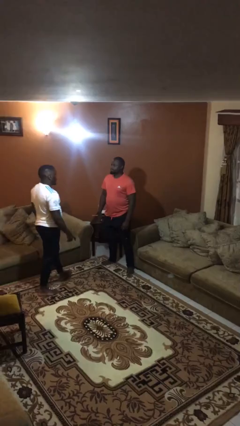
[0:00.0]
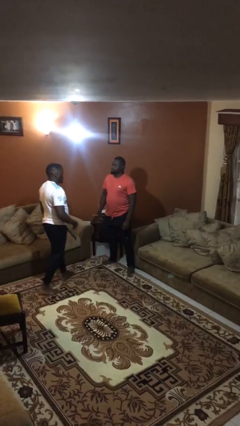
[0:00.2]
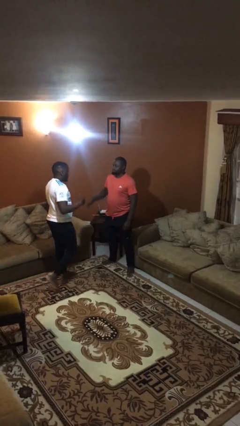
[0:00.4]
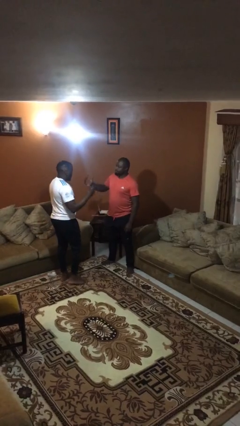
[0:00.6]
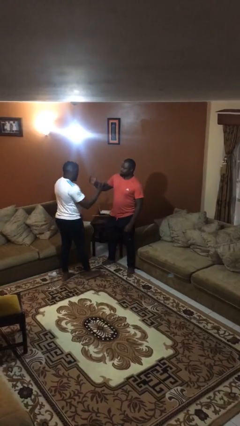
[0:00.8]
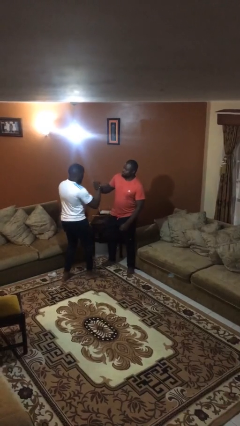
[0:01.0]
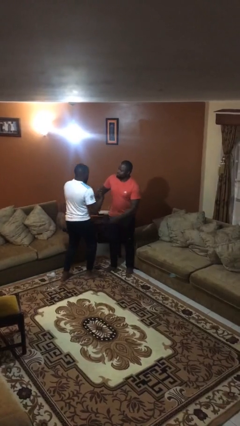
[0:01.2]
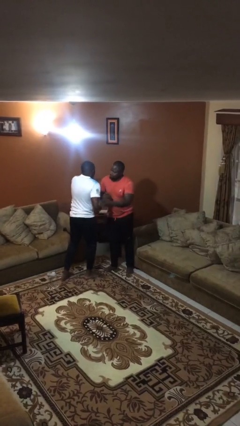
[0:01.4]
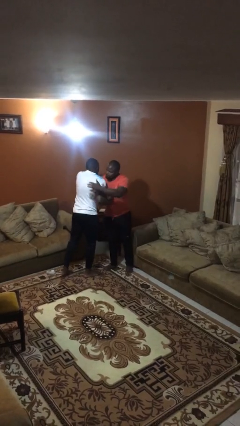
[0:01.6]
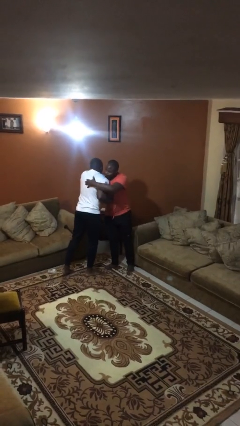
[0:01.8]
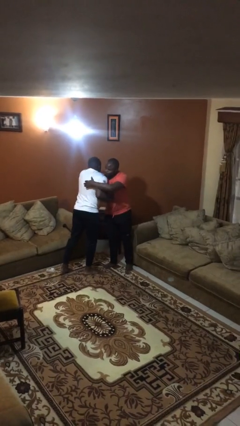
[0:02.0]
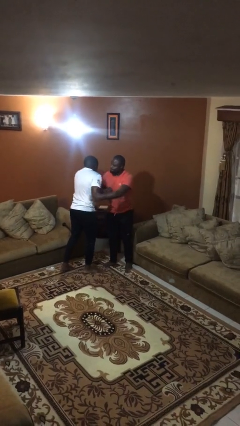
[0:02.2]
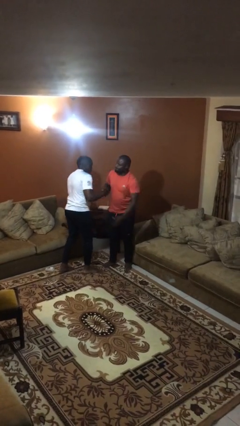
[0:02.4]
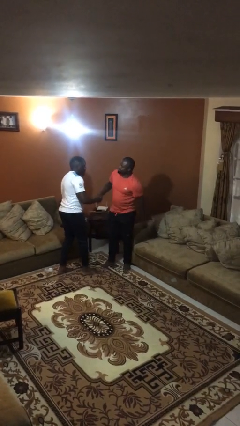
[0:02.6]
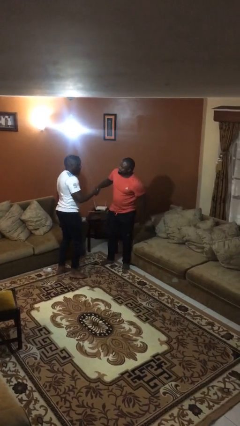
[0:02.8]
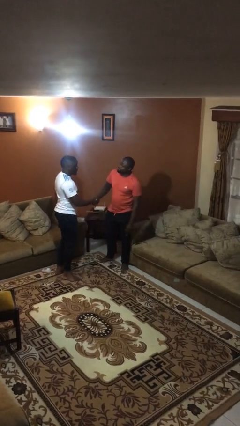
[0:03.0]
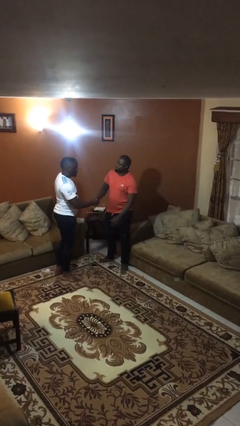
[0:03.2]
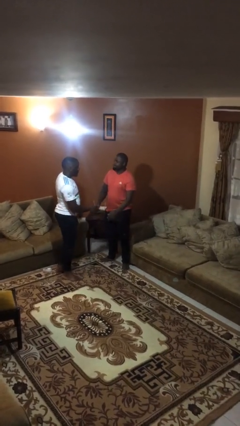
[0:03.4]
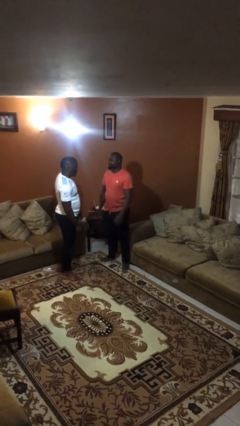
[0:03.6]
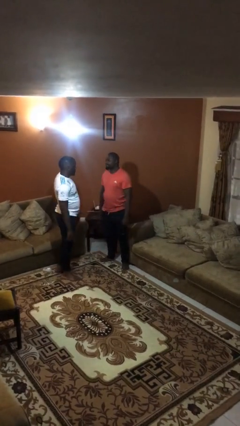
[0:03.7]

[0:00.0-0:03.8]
person embraces person

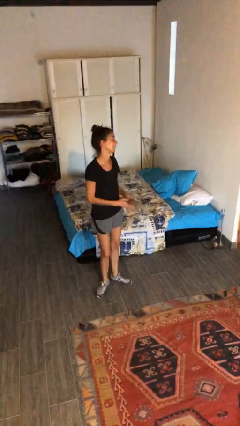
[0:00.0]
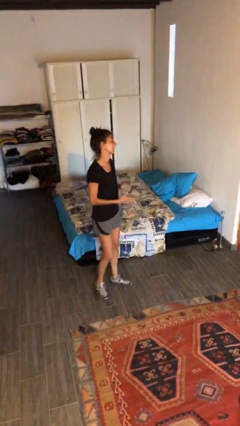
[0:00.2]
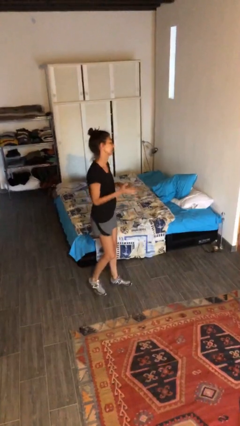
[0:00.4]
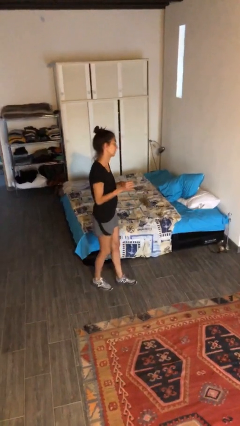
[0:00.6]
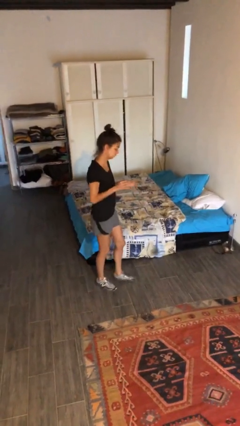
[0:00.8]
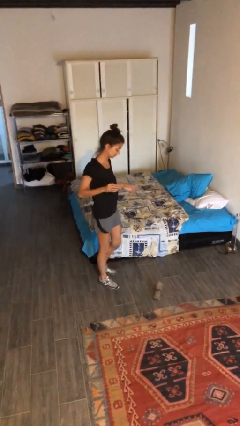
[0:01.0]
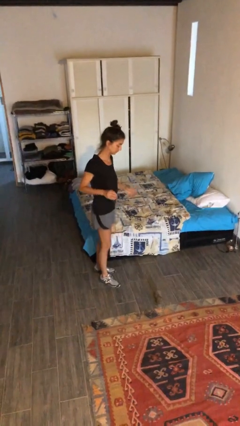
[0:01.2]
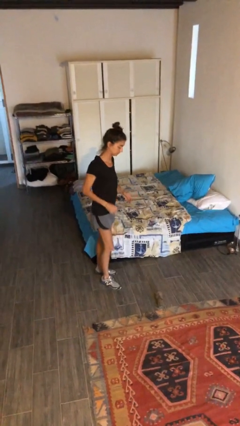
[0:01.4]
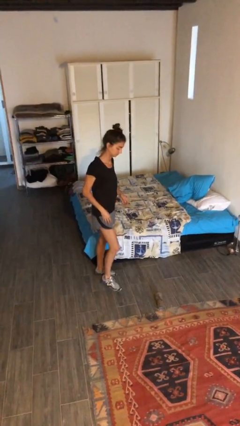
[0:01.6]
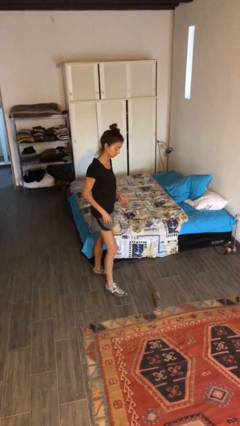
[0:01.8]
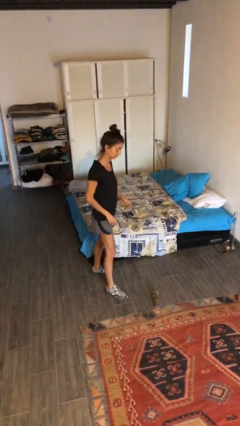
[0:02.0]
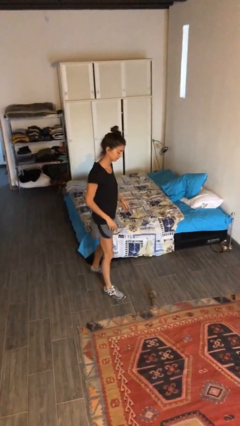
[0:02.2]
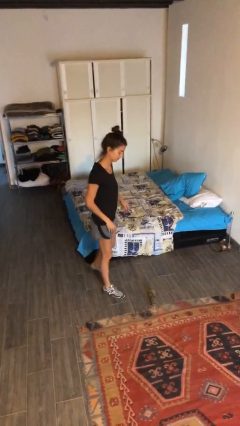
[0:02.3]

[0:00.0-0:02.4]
person drops object

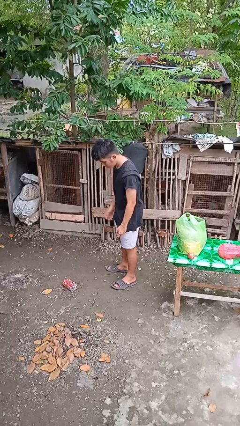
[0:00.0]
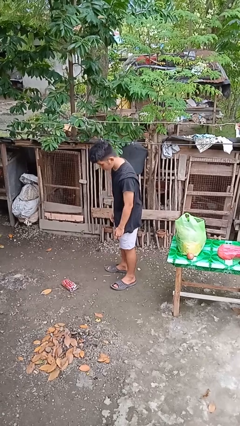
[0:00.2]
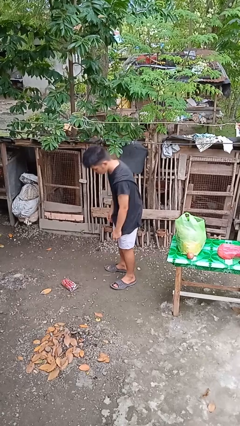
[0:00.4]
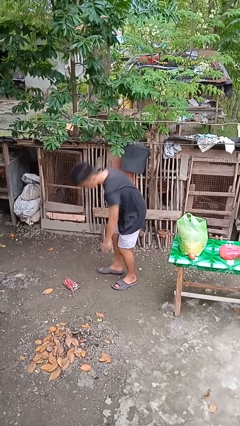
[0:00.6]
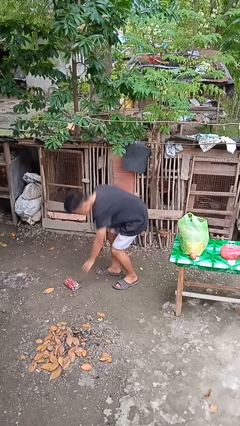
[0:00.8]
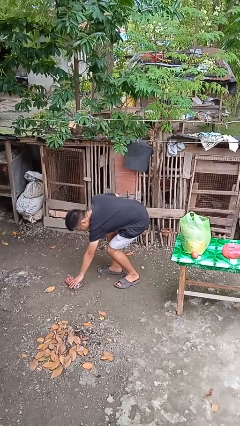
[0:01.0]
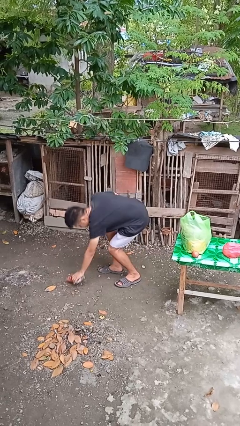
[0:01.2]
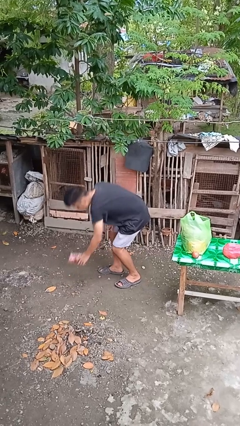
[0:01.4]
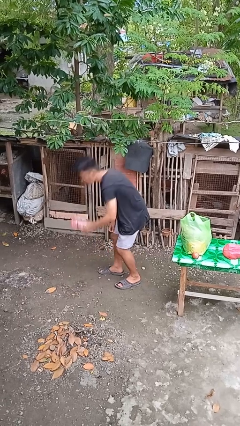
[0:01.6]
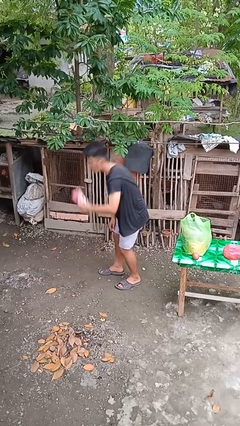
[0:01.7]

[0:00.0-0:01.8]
person picks up object from floor

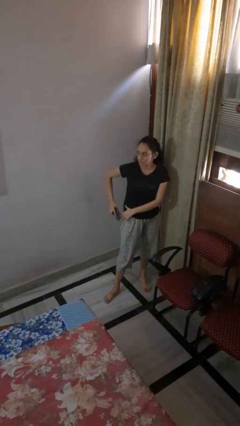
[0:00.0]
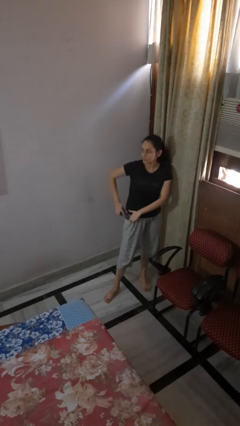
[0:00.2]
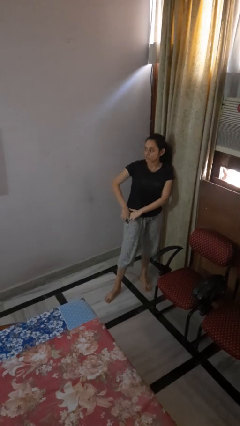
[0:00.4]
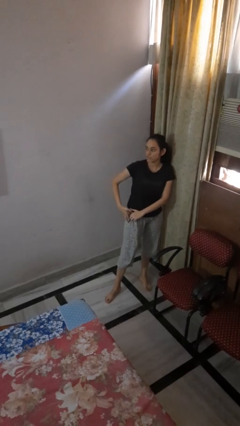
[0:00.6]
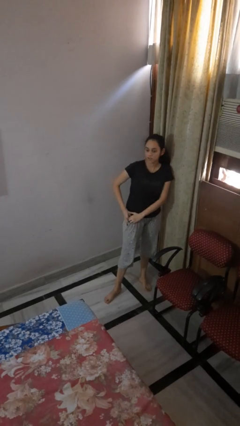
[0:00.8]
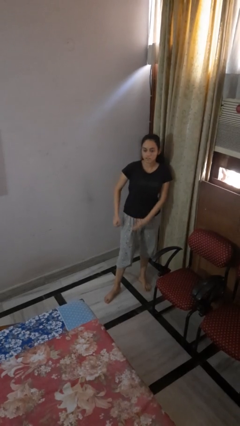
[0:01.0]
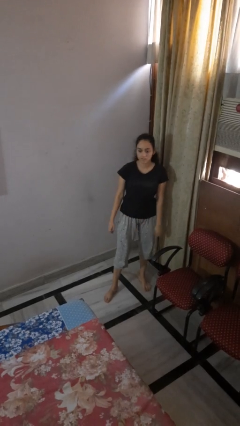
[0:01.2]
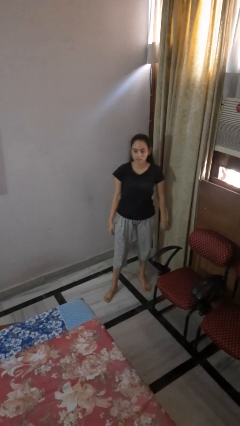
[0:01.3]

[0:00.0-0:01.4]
person puts phone into pocket

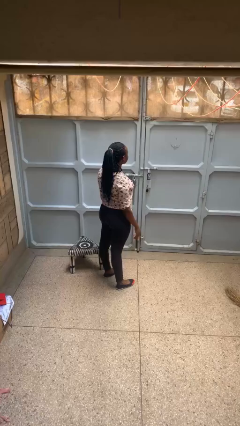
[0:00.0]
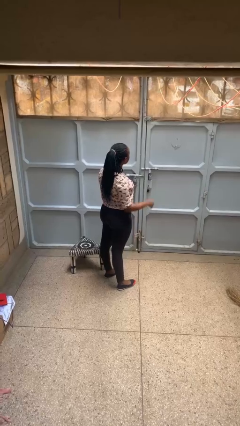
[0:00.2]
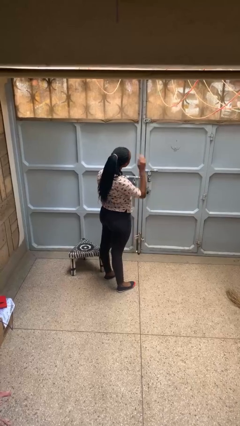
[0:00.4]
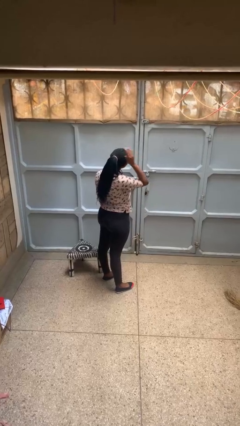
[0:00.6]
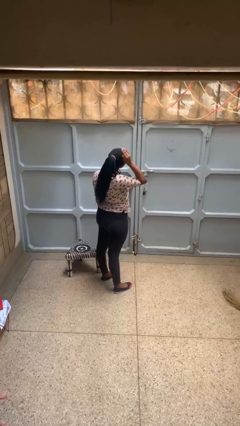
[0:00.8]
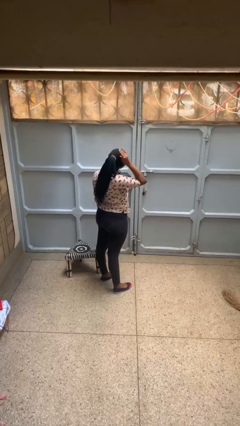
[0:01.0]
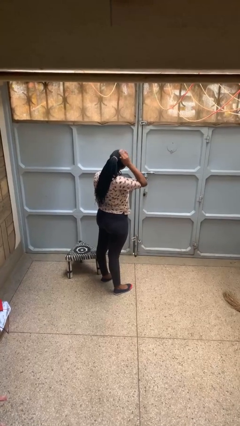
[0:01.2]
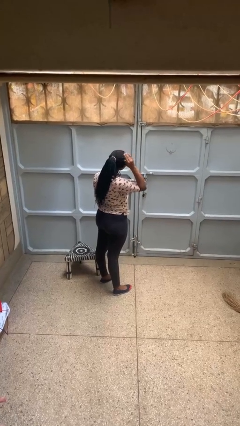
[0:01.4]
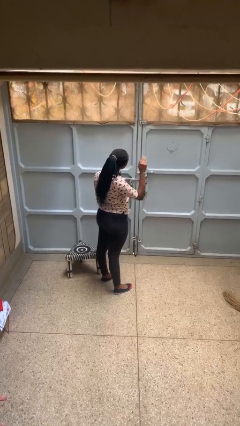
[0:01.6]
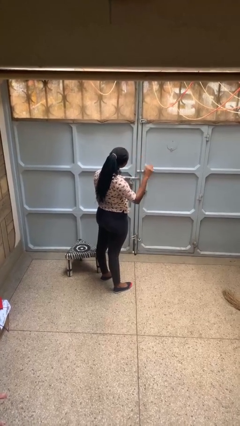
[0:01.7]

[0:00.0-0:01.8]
person pats head

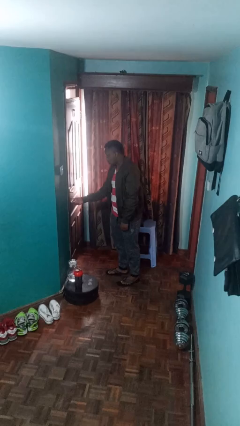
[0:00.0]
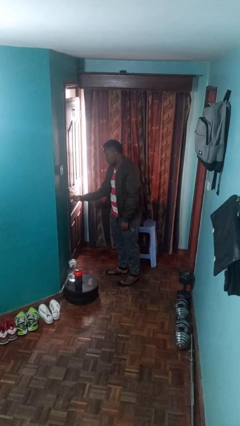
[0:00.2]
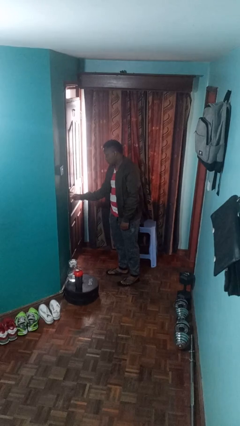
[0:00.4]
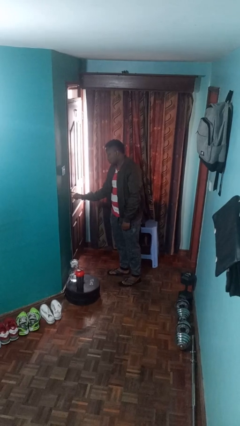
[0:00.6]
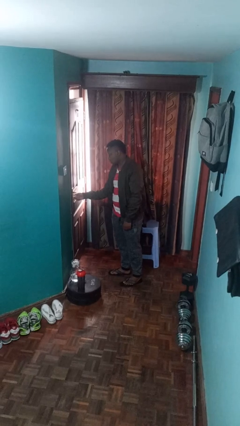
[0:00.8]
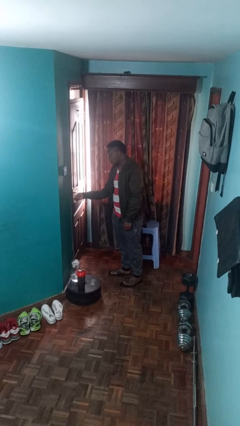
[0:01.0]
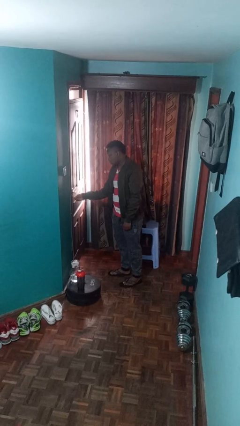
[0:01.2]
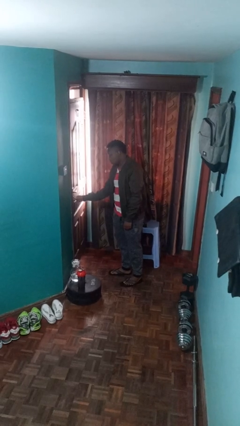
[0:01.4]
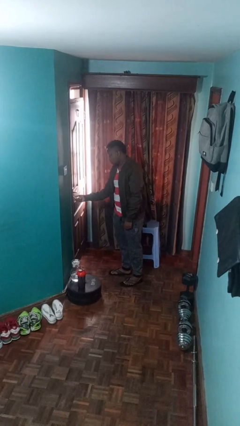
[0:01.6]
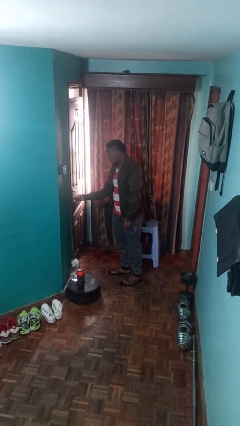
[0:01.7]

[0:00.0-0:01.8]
person locks door with keys

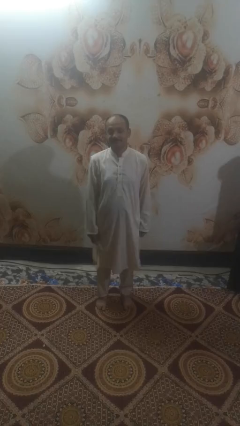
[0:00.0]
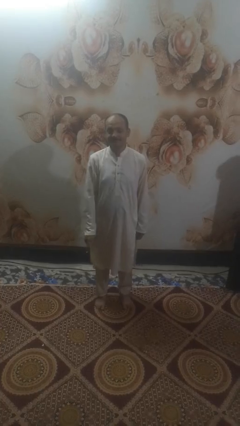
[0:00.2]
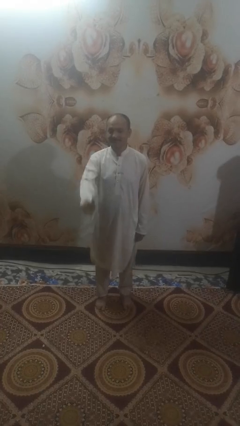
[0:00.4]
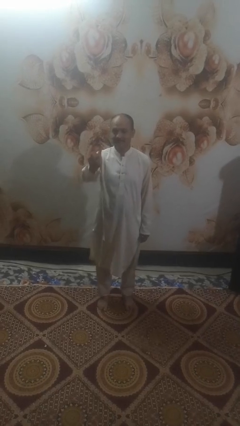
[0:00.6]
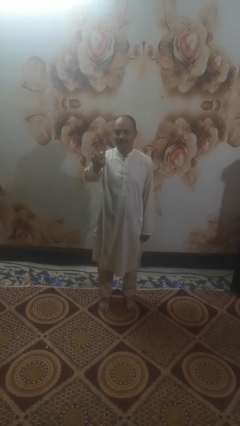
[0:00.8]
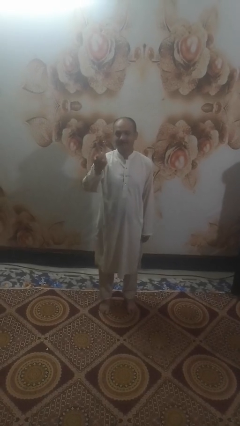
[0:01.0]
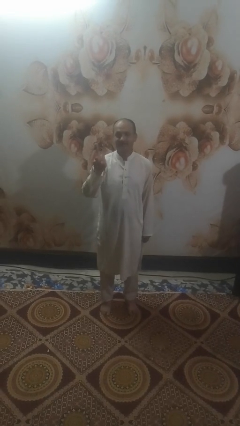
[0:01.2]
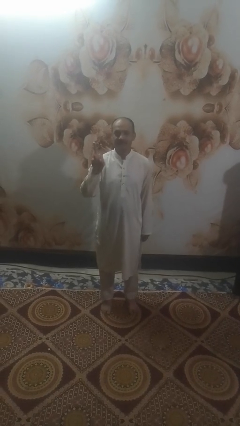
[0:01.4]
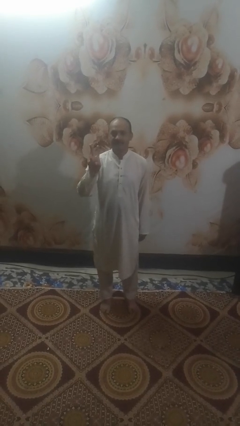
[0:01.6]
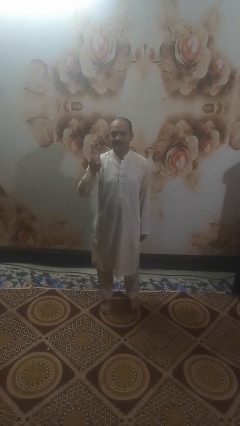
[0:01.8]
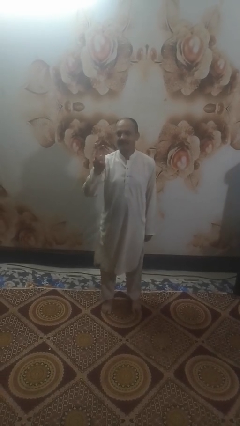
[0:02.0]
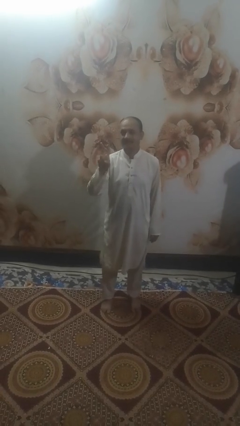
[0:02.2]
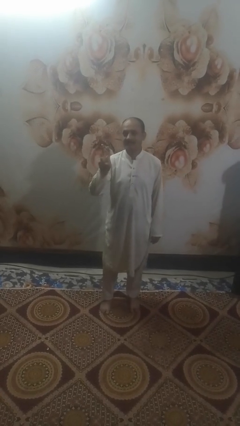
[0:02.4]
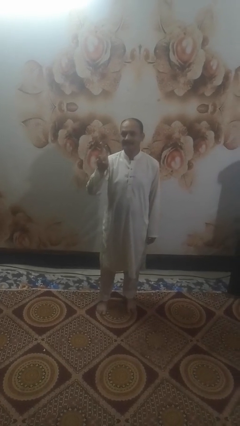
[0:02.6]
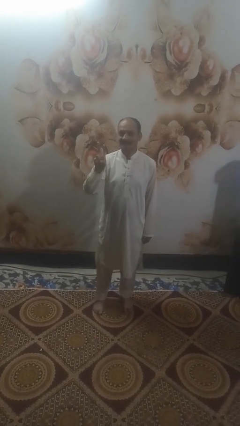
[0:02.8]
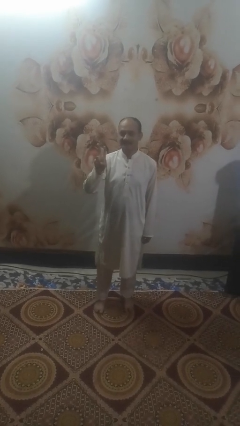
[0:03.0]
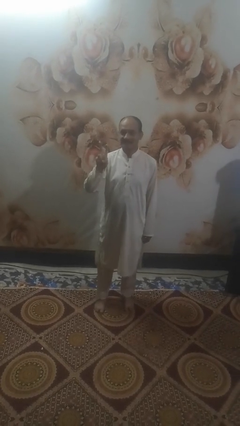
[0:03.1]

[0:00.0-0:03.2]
person gestures peace

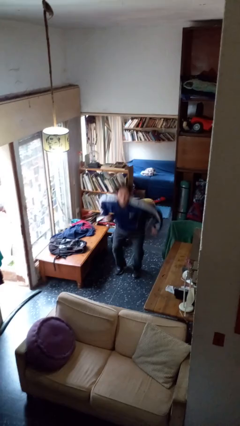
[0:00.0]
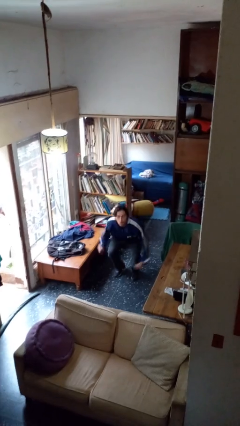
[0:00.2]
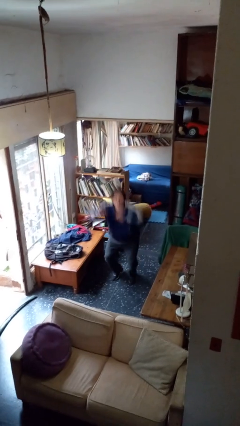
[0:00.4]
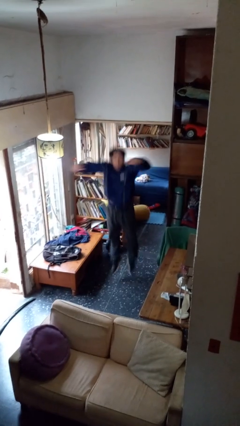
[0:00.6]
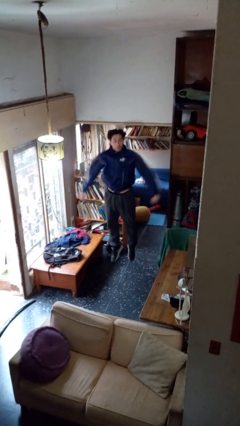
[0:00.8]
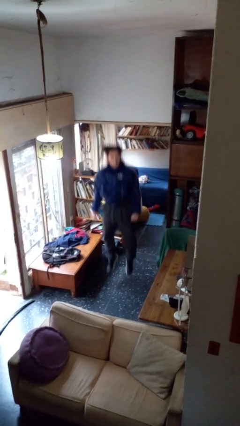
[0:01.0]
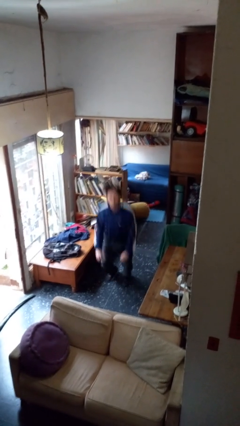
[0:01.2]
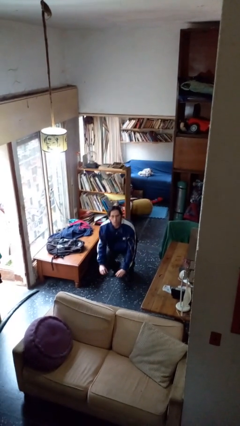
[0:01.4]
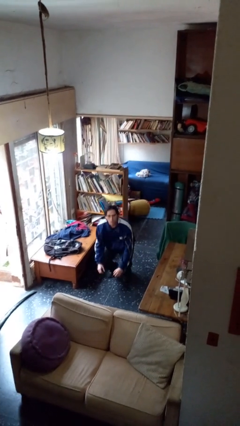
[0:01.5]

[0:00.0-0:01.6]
person jumps
